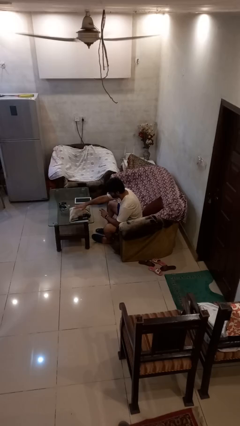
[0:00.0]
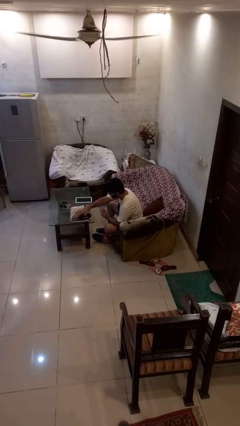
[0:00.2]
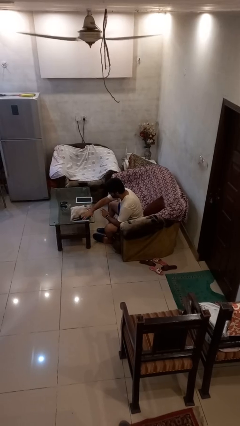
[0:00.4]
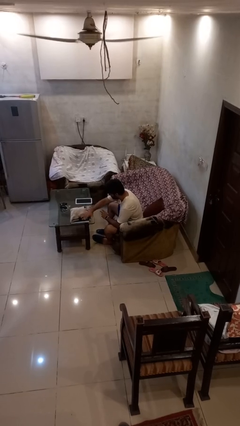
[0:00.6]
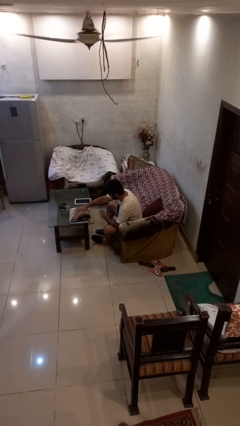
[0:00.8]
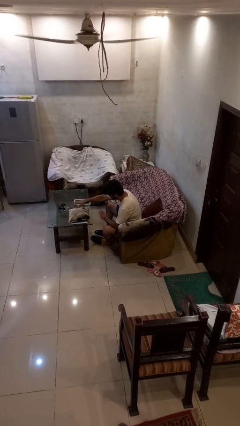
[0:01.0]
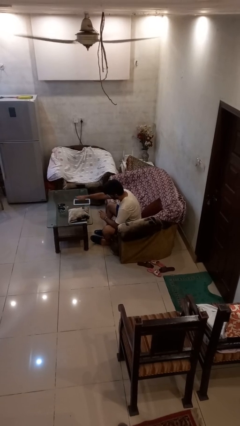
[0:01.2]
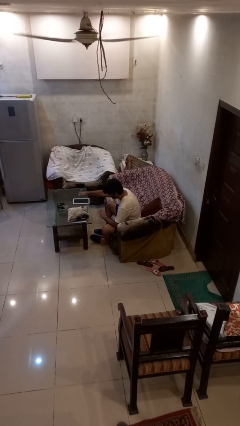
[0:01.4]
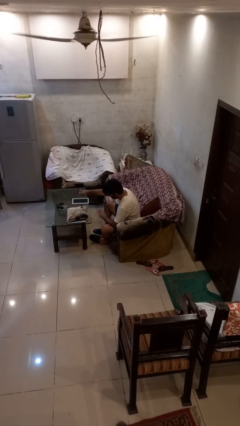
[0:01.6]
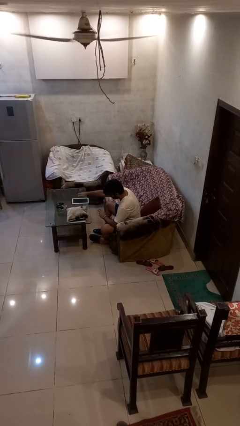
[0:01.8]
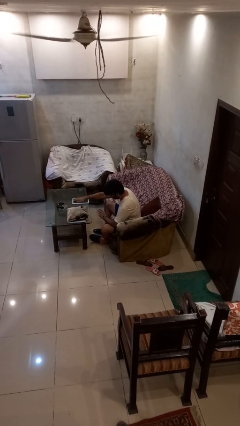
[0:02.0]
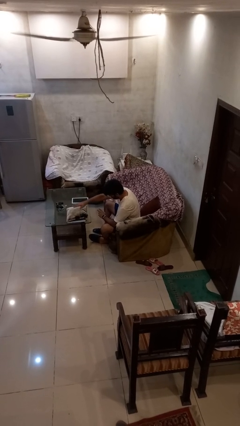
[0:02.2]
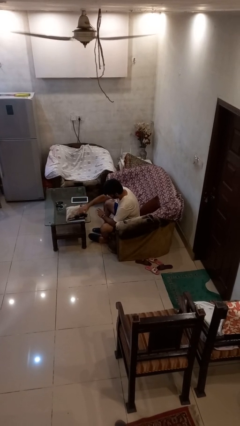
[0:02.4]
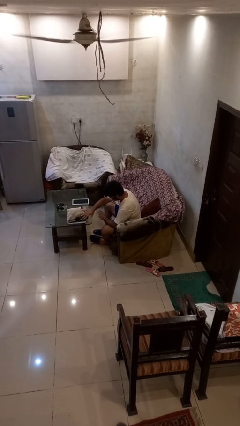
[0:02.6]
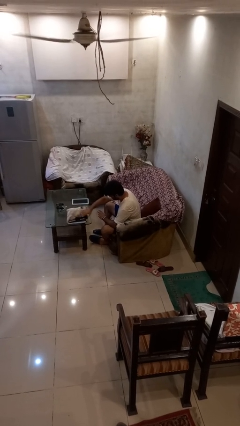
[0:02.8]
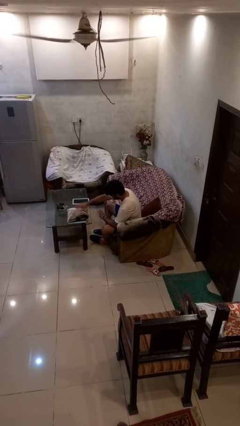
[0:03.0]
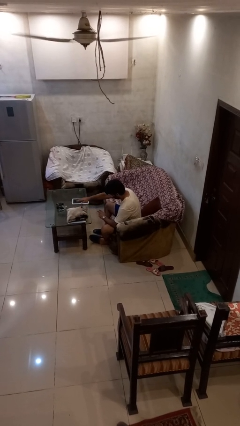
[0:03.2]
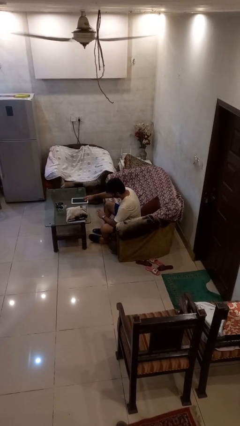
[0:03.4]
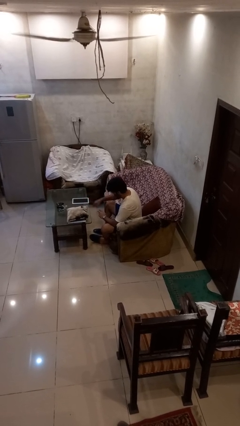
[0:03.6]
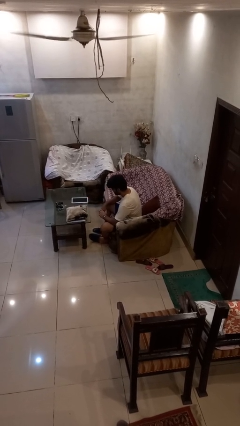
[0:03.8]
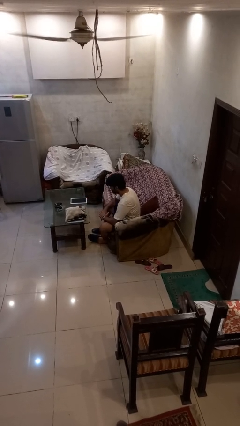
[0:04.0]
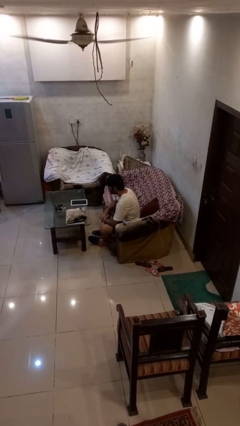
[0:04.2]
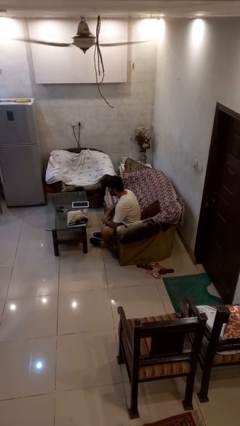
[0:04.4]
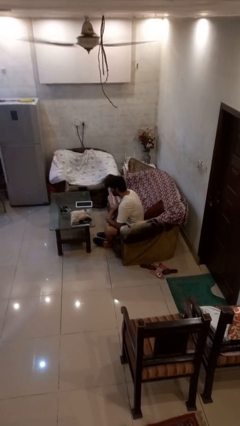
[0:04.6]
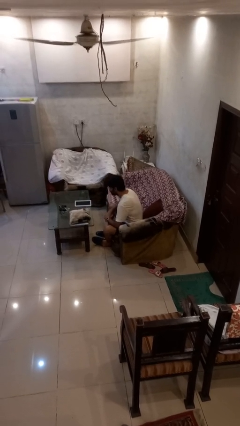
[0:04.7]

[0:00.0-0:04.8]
person waves hand over object

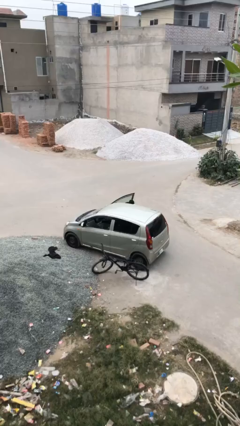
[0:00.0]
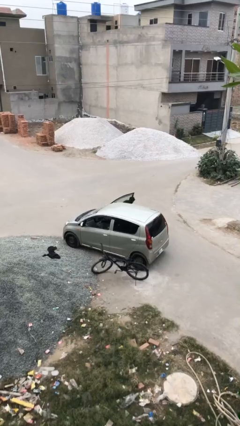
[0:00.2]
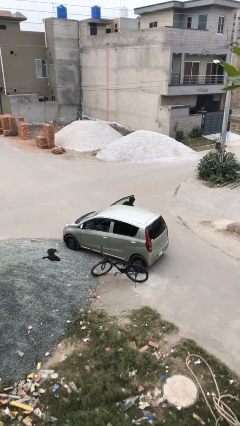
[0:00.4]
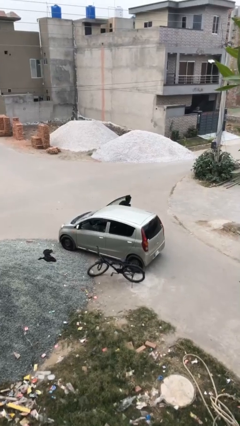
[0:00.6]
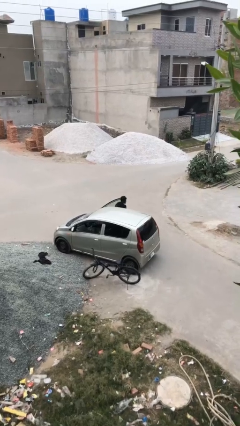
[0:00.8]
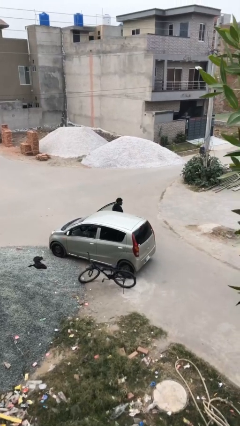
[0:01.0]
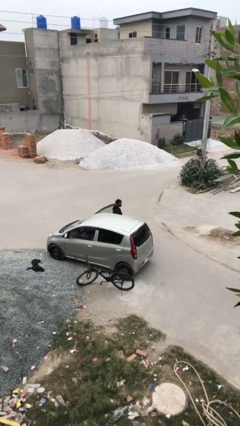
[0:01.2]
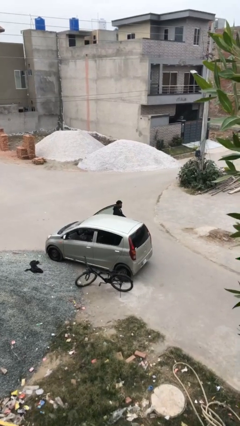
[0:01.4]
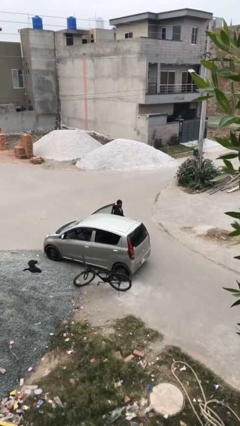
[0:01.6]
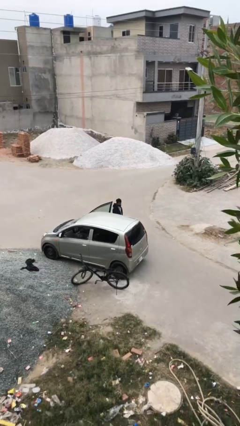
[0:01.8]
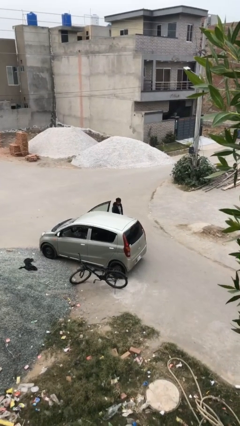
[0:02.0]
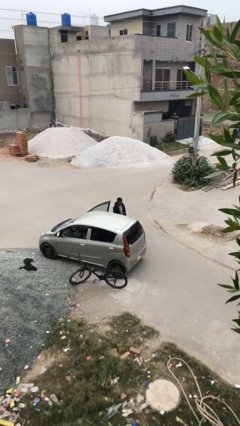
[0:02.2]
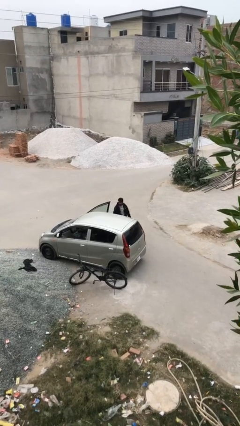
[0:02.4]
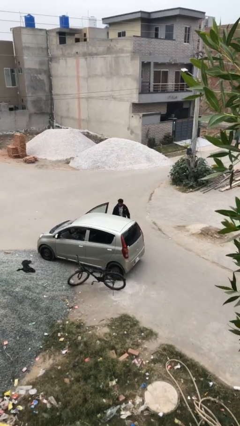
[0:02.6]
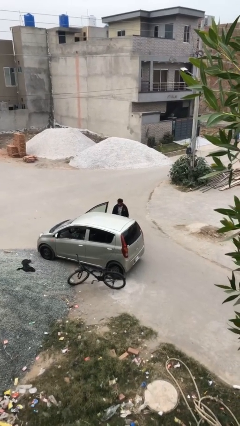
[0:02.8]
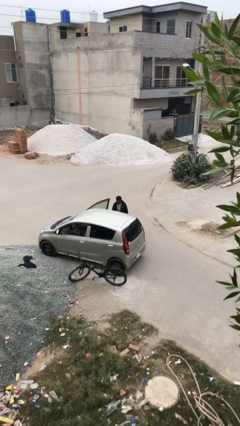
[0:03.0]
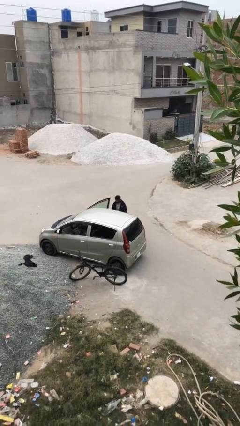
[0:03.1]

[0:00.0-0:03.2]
person exits car

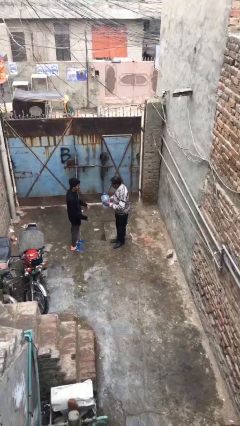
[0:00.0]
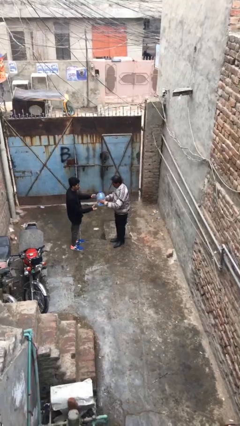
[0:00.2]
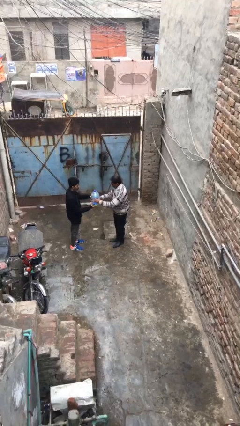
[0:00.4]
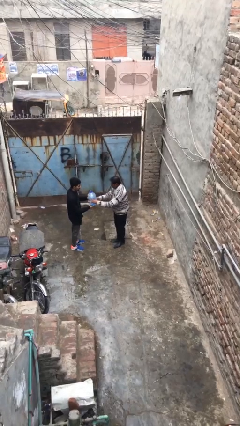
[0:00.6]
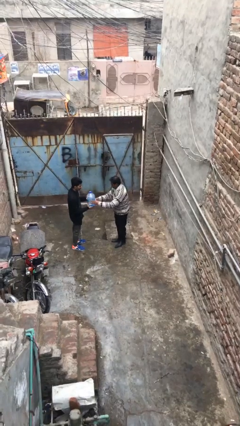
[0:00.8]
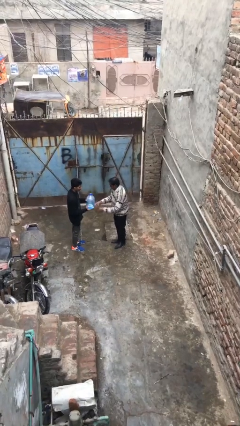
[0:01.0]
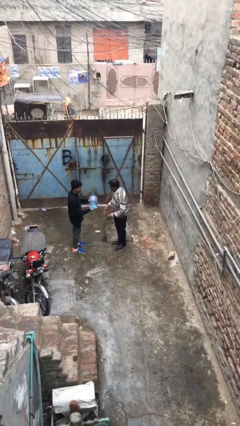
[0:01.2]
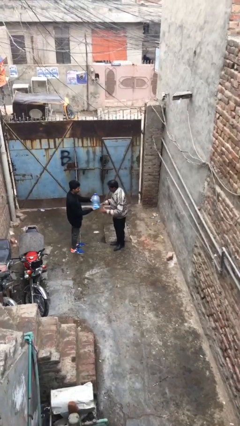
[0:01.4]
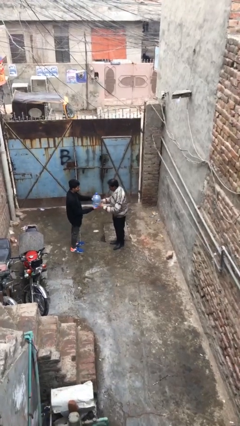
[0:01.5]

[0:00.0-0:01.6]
person transfers object to person

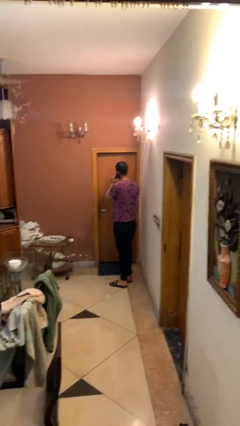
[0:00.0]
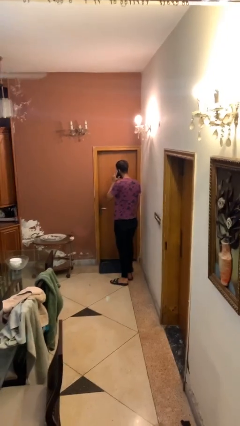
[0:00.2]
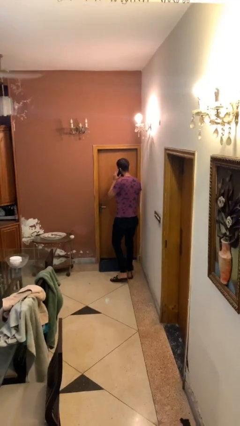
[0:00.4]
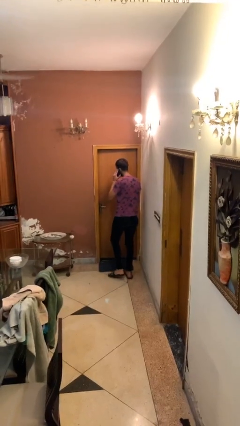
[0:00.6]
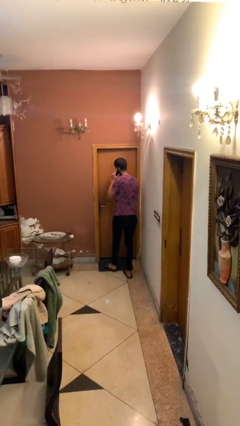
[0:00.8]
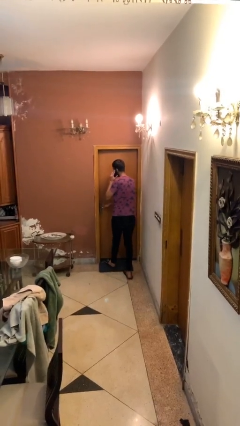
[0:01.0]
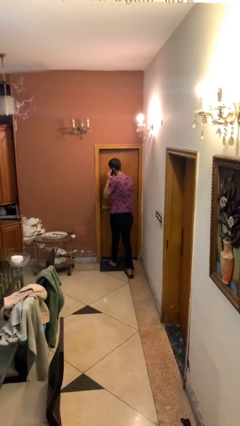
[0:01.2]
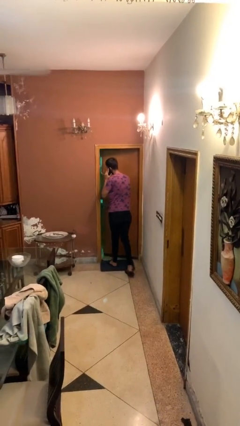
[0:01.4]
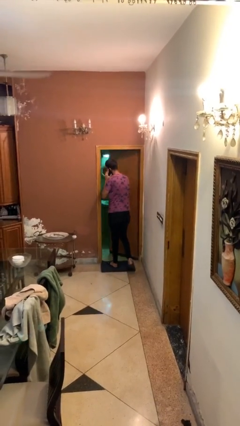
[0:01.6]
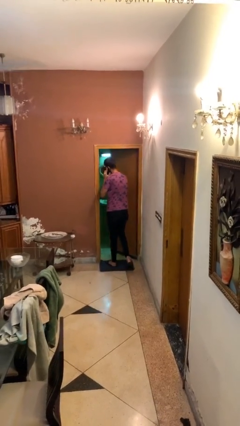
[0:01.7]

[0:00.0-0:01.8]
person opens facility door

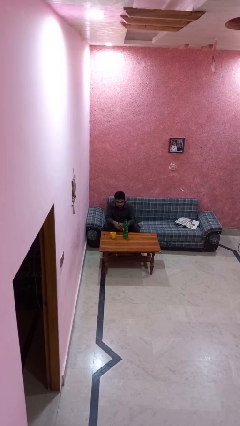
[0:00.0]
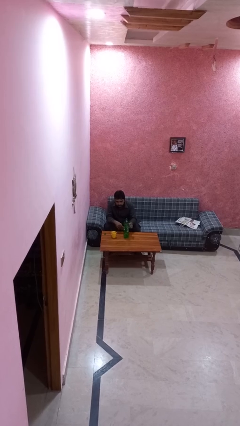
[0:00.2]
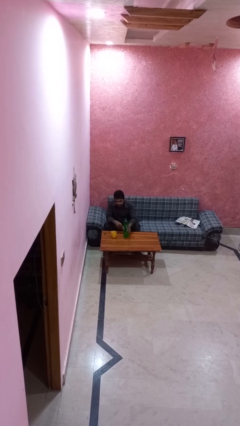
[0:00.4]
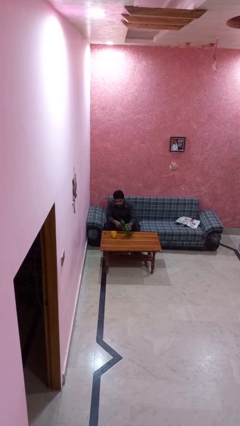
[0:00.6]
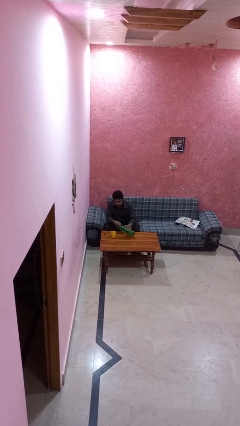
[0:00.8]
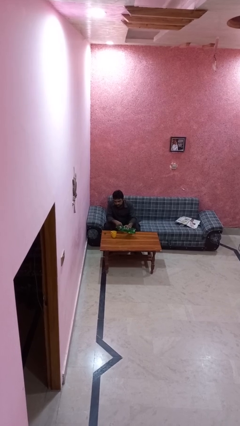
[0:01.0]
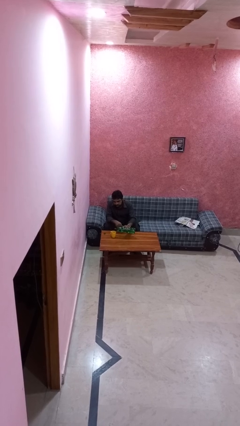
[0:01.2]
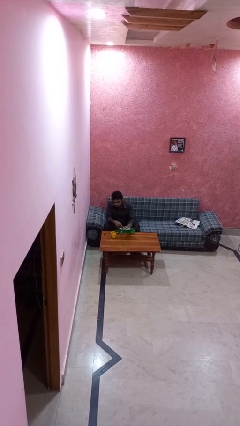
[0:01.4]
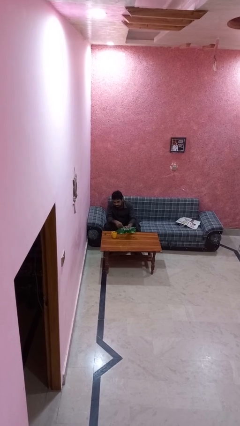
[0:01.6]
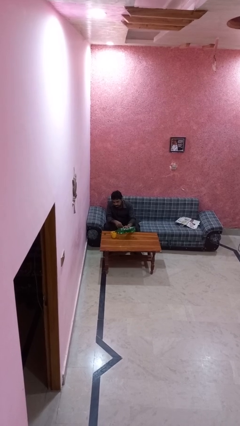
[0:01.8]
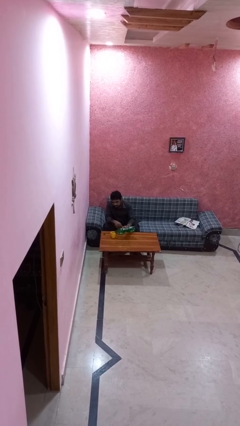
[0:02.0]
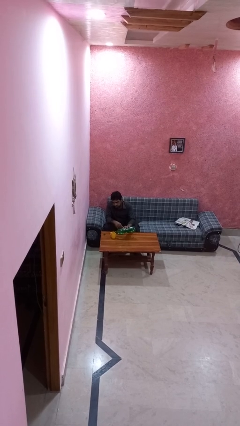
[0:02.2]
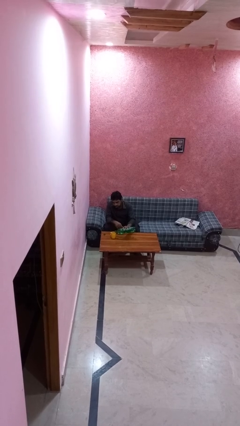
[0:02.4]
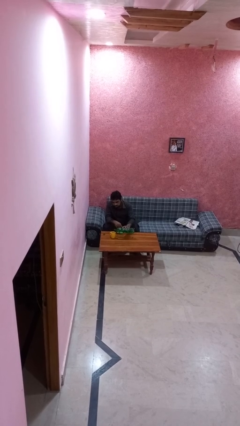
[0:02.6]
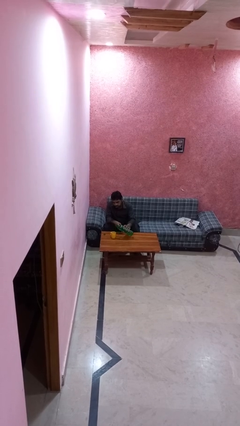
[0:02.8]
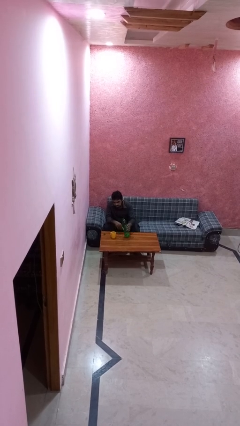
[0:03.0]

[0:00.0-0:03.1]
person pours liquid into cup

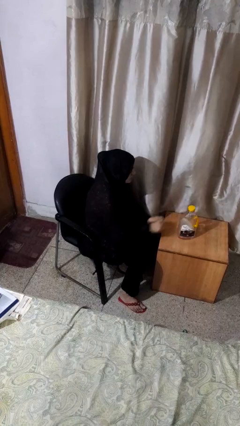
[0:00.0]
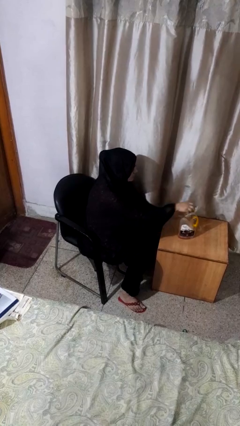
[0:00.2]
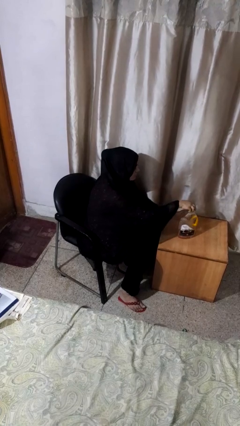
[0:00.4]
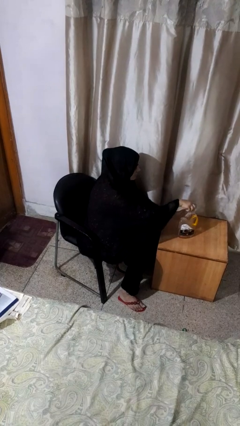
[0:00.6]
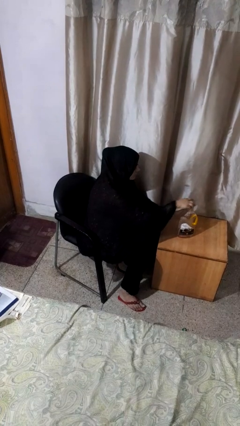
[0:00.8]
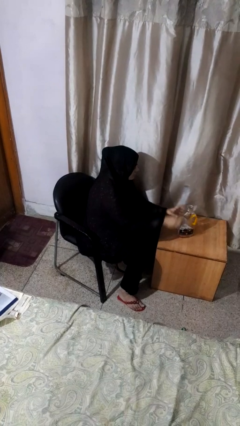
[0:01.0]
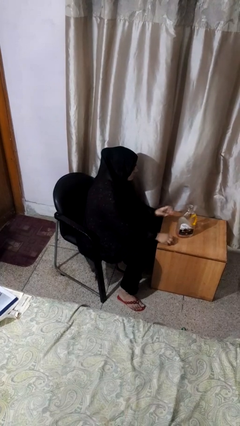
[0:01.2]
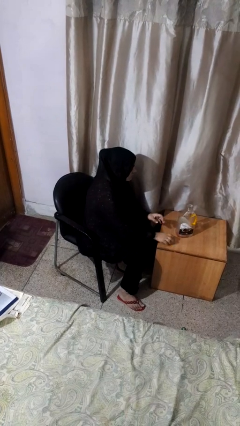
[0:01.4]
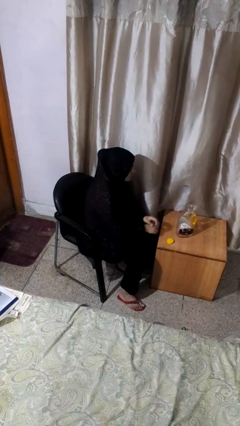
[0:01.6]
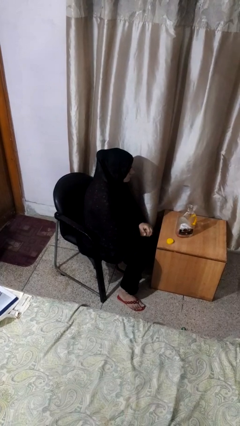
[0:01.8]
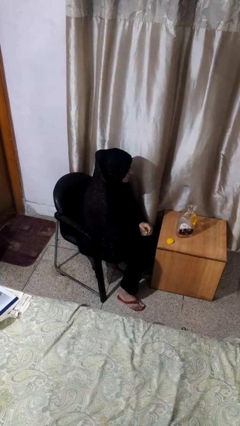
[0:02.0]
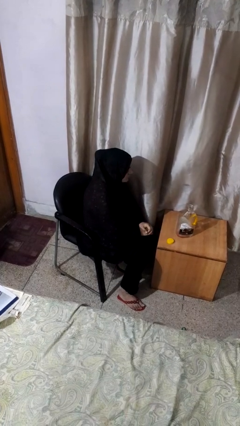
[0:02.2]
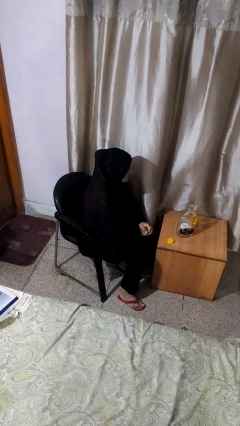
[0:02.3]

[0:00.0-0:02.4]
person unscrews lid from bottle

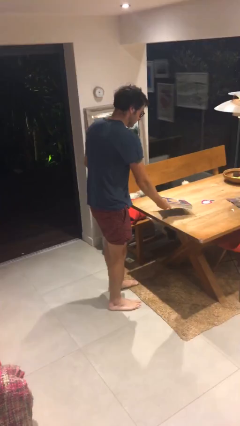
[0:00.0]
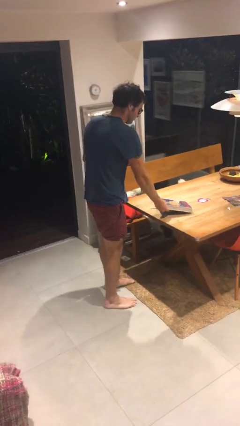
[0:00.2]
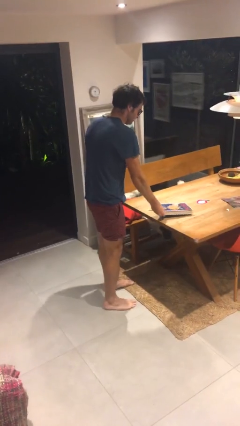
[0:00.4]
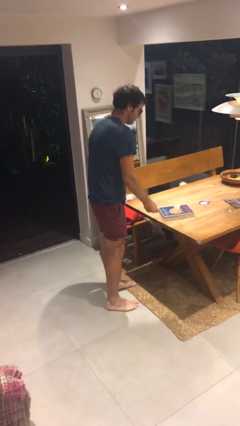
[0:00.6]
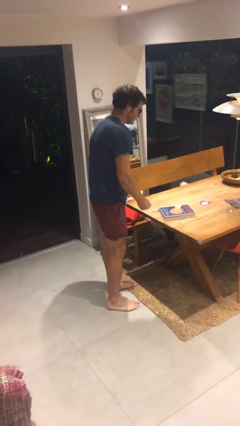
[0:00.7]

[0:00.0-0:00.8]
person puts down object on table
